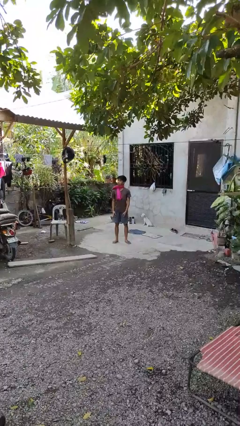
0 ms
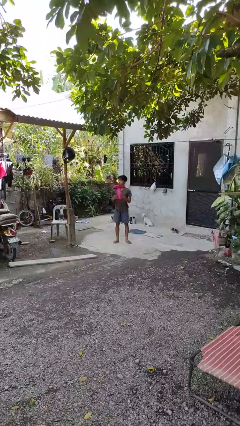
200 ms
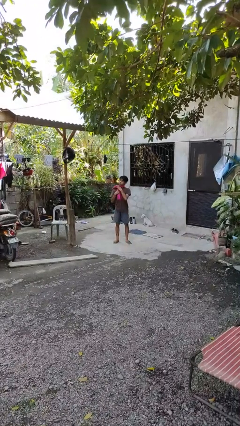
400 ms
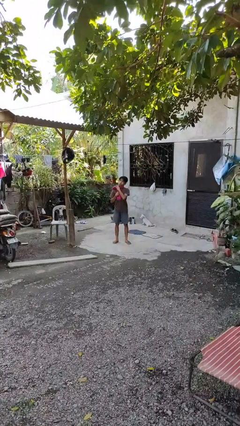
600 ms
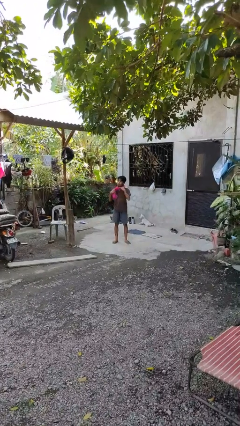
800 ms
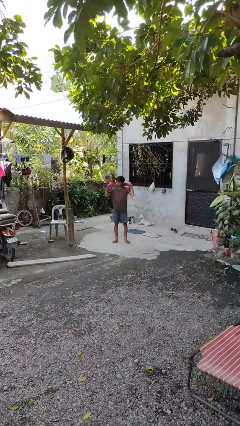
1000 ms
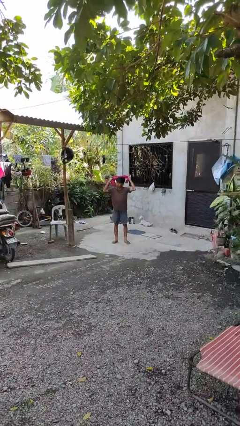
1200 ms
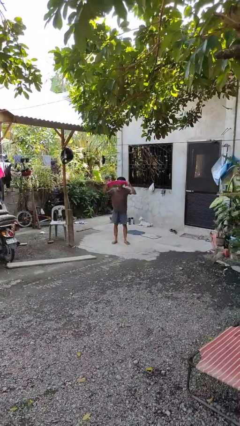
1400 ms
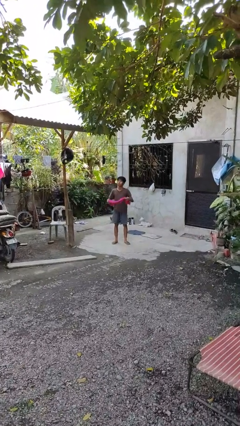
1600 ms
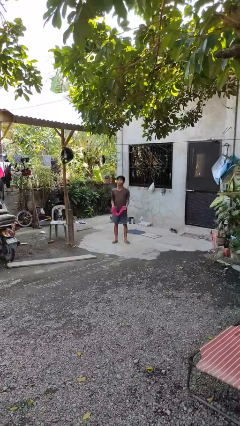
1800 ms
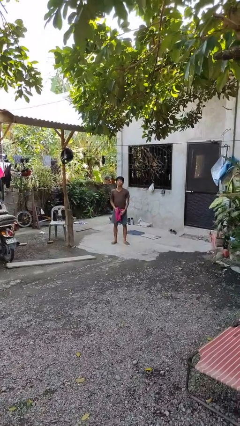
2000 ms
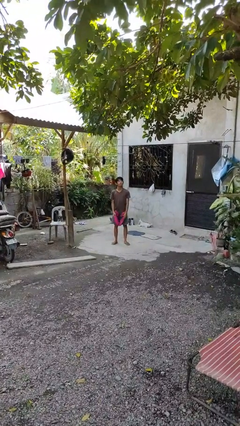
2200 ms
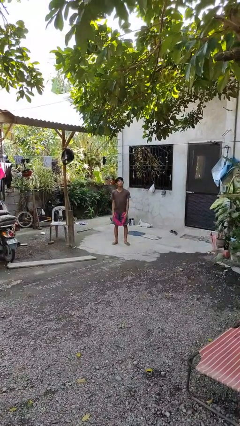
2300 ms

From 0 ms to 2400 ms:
person takes off scarf

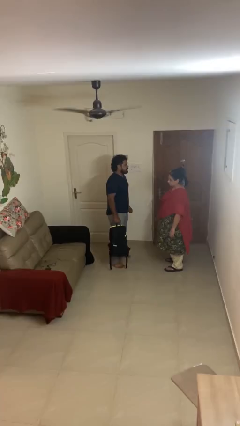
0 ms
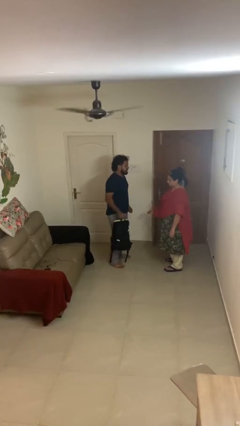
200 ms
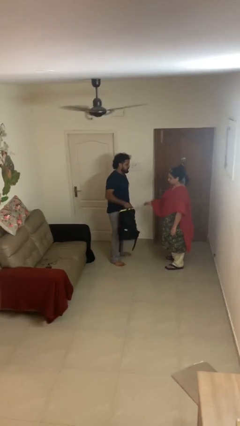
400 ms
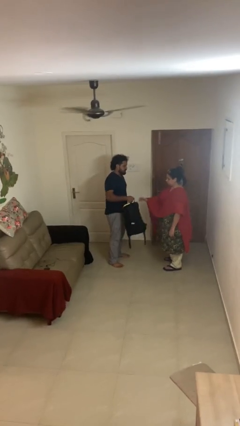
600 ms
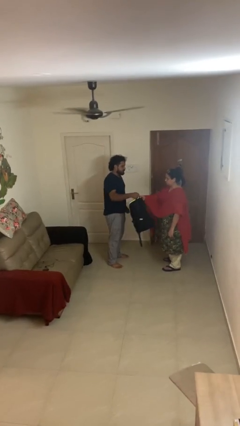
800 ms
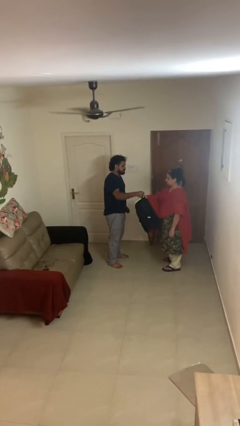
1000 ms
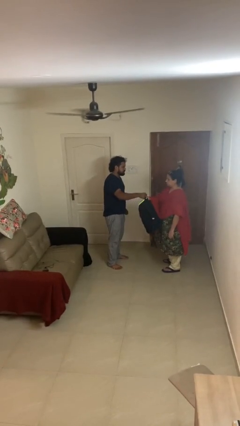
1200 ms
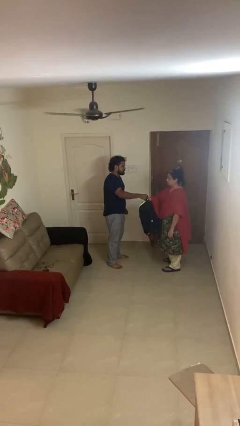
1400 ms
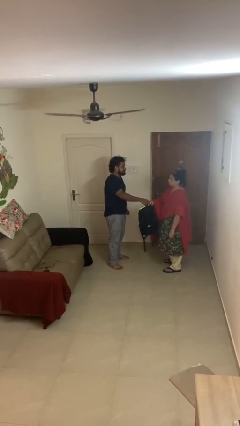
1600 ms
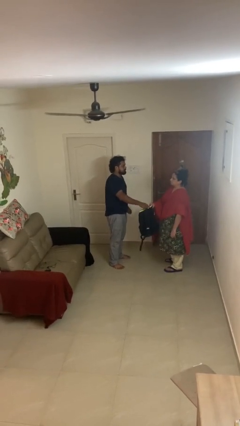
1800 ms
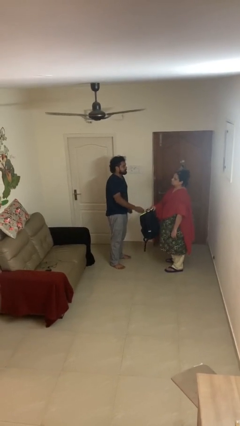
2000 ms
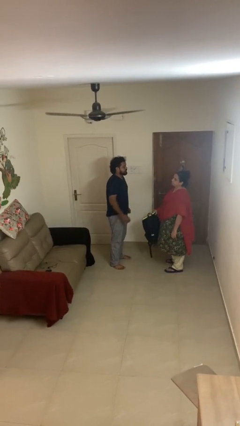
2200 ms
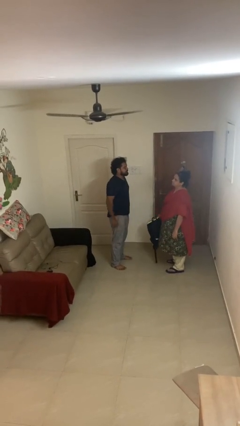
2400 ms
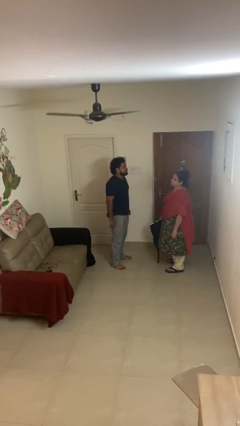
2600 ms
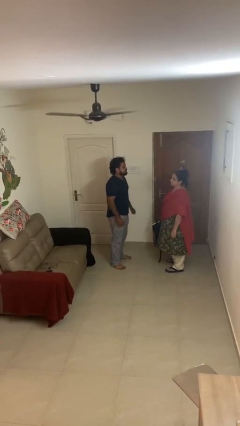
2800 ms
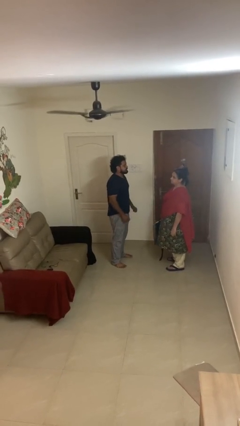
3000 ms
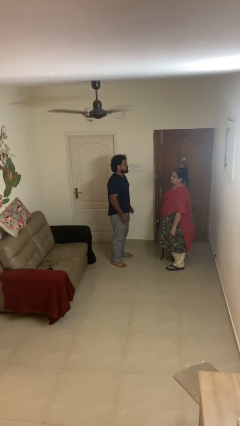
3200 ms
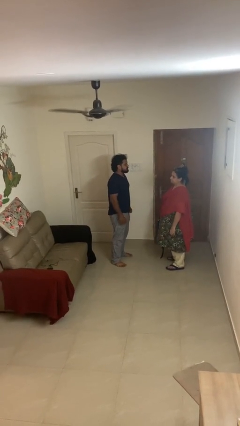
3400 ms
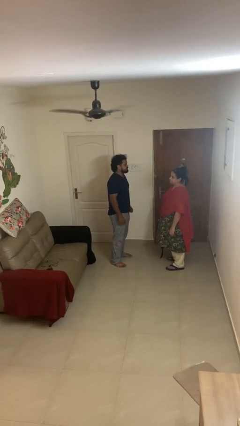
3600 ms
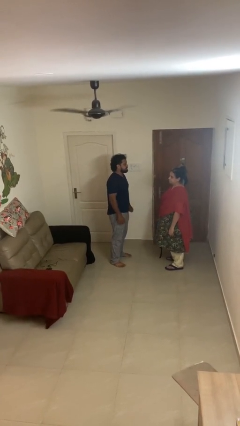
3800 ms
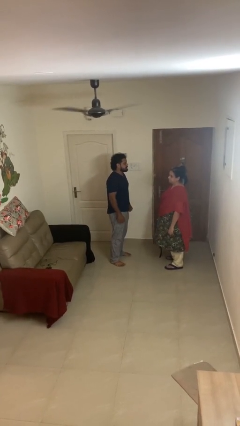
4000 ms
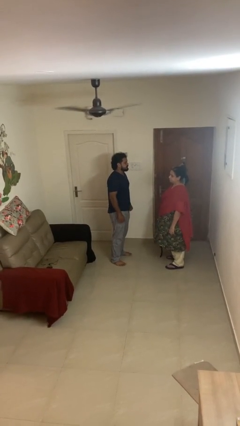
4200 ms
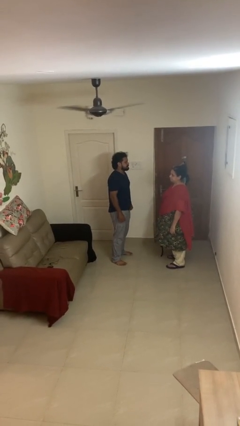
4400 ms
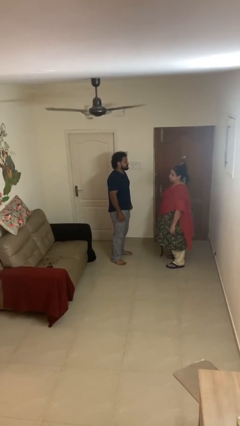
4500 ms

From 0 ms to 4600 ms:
person transfers object to person

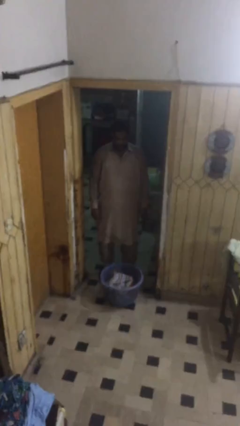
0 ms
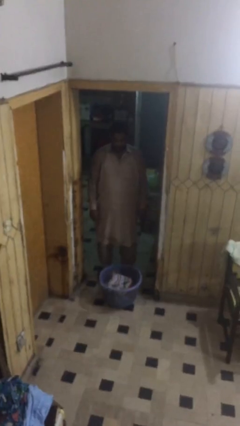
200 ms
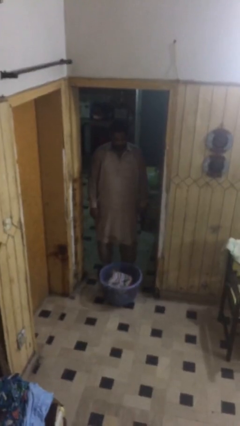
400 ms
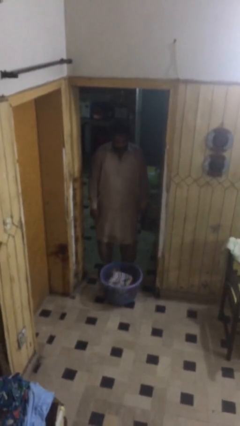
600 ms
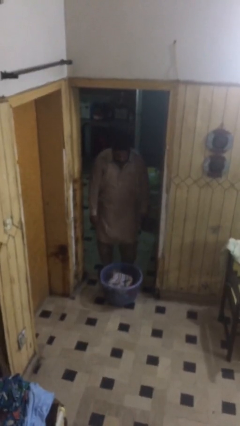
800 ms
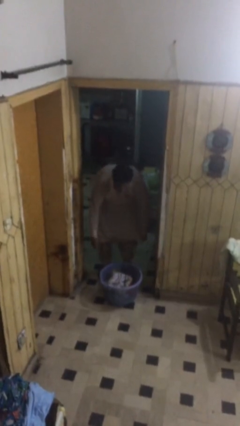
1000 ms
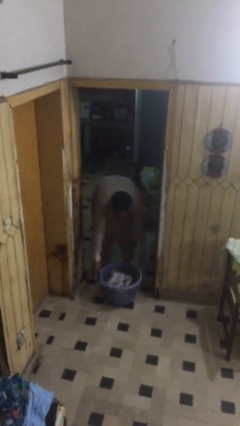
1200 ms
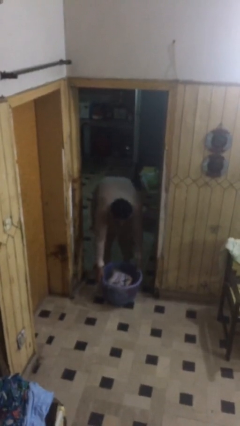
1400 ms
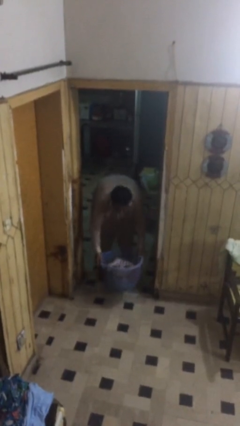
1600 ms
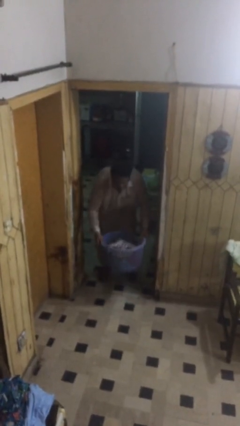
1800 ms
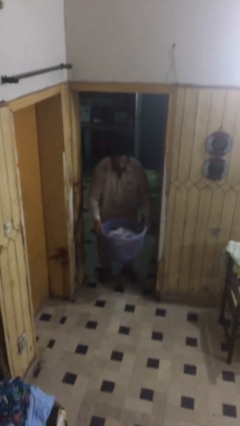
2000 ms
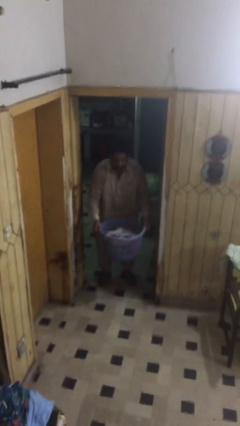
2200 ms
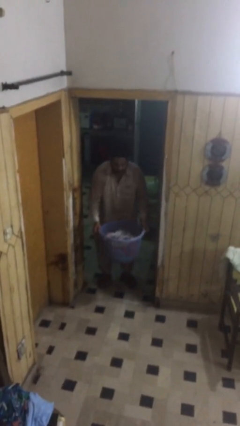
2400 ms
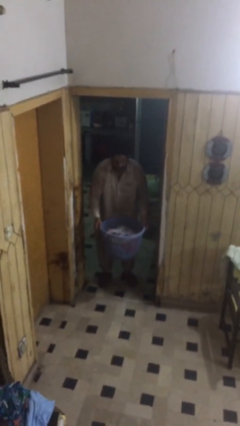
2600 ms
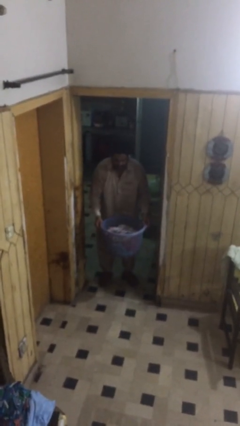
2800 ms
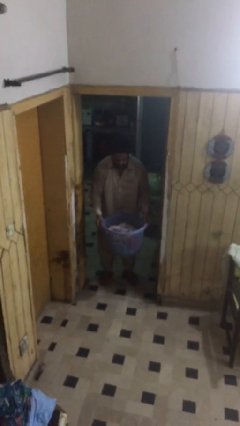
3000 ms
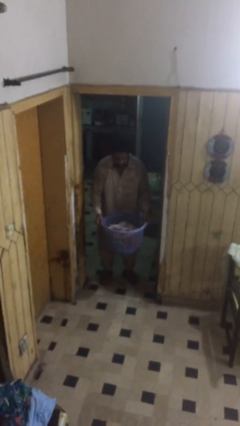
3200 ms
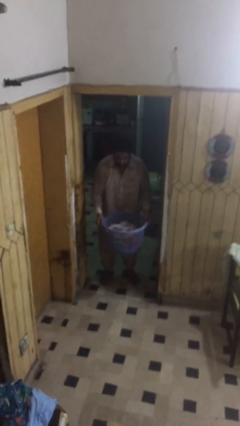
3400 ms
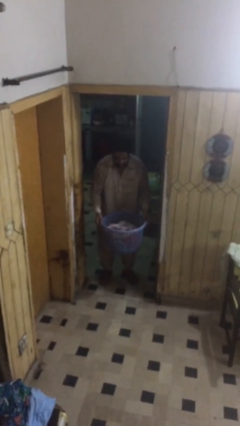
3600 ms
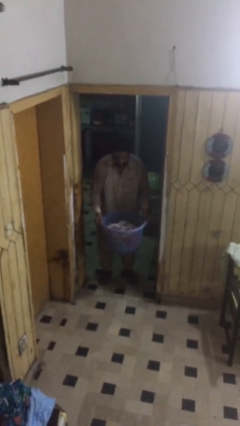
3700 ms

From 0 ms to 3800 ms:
person picks up object from floor

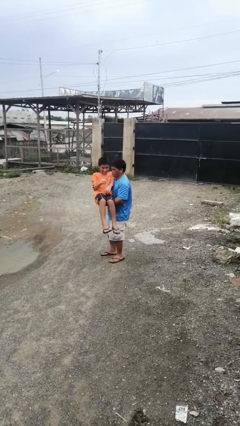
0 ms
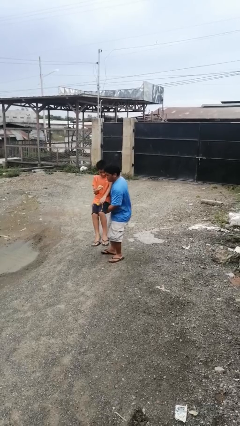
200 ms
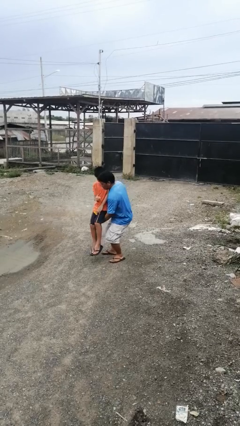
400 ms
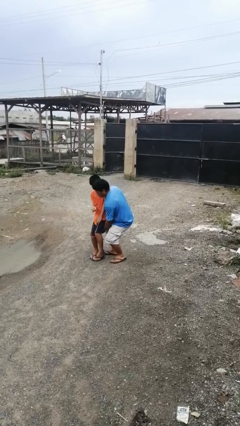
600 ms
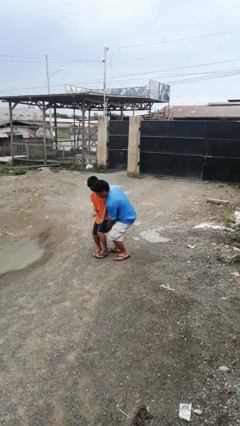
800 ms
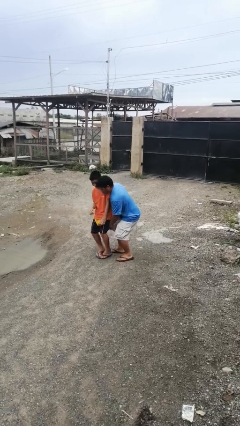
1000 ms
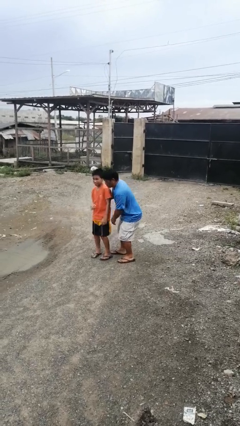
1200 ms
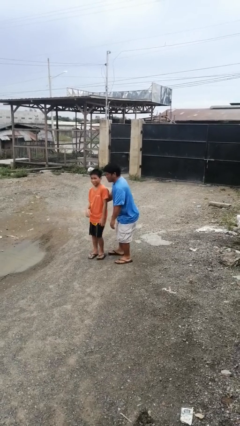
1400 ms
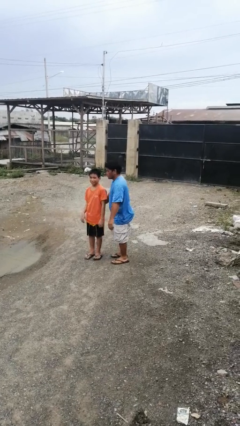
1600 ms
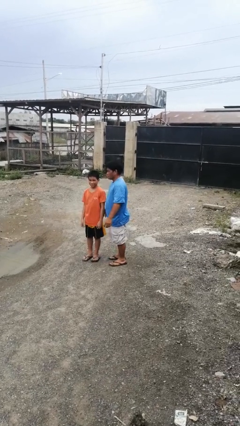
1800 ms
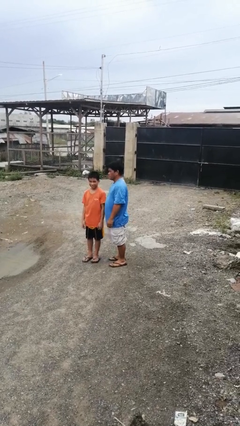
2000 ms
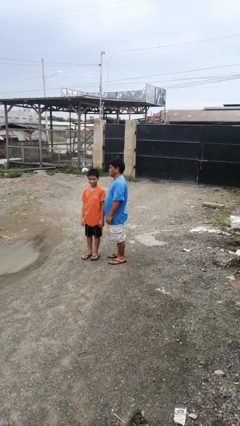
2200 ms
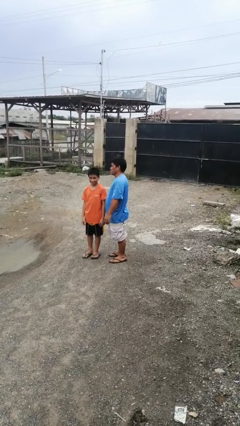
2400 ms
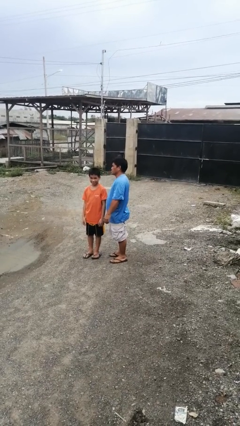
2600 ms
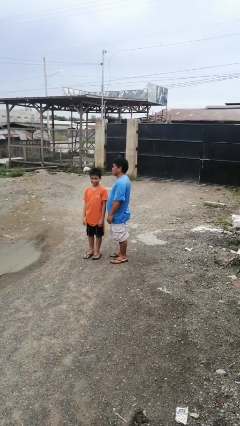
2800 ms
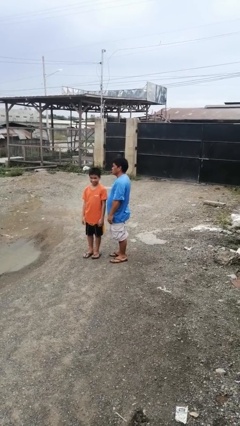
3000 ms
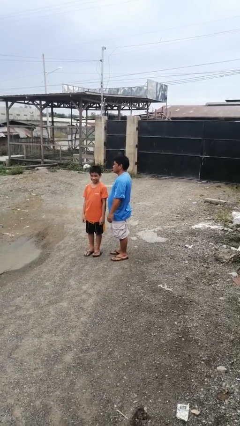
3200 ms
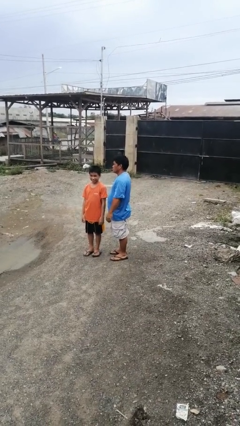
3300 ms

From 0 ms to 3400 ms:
person puts down person

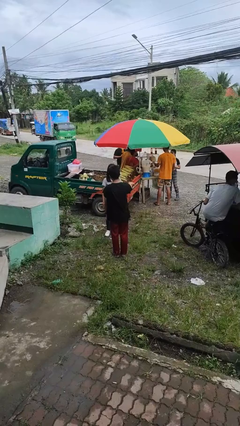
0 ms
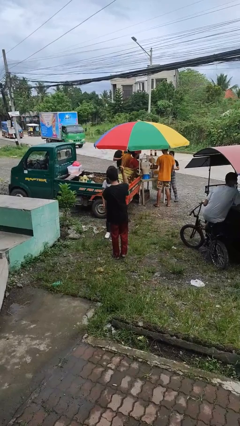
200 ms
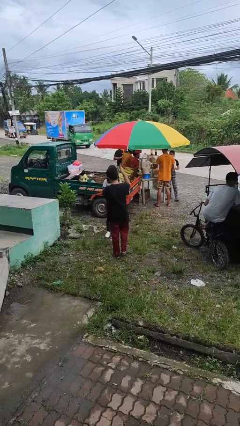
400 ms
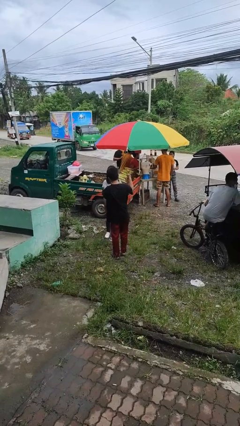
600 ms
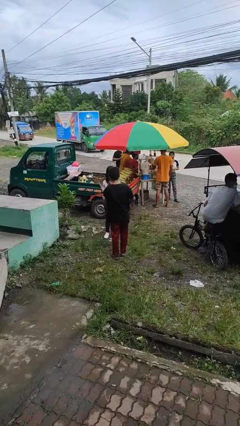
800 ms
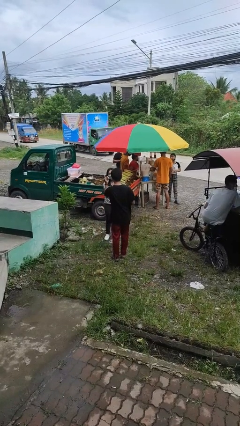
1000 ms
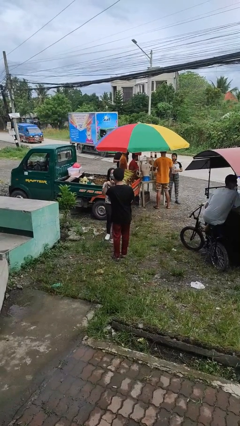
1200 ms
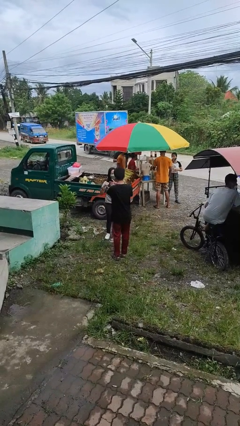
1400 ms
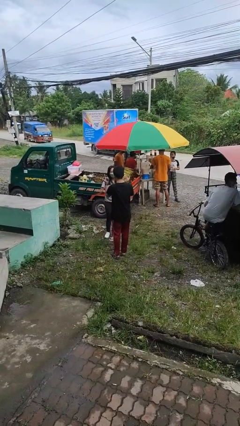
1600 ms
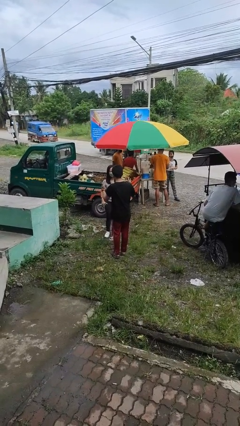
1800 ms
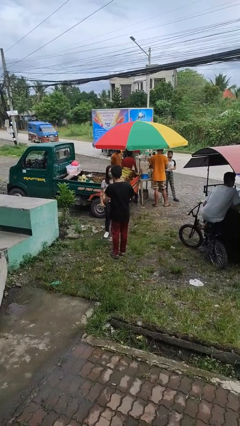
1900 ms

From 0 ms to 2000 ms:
person talks to person

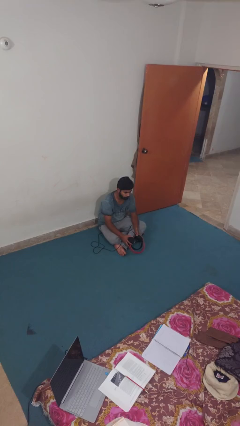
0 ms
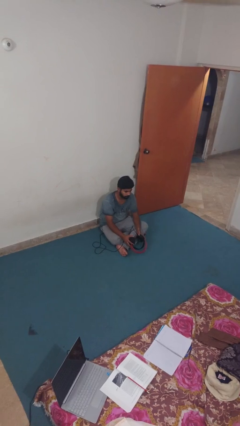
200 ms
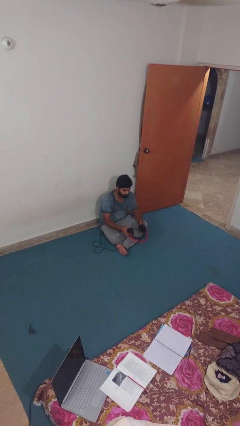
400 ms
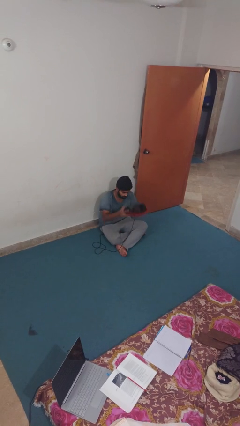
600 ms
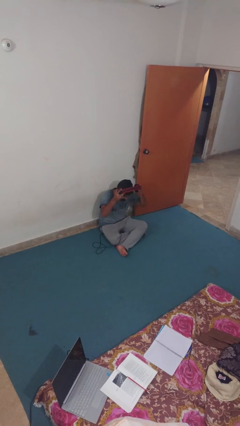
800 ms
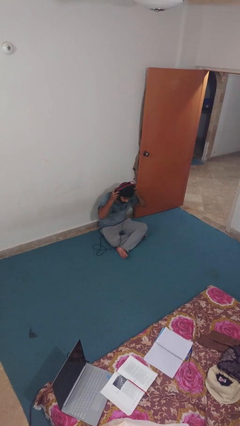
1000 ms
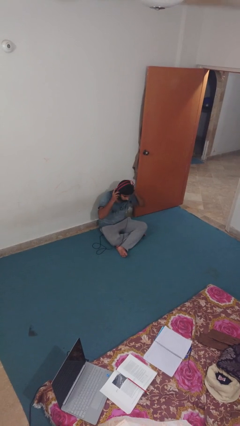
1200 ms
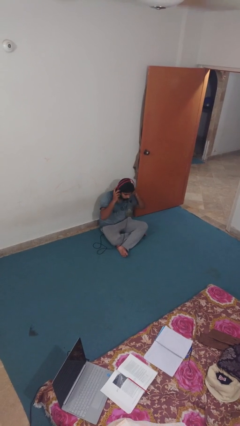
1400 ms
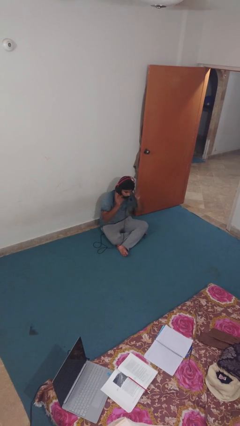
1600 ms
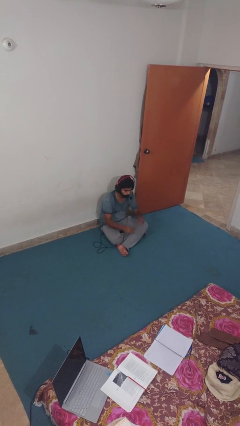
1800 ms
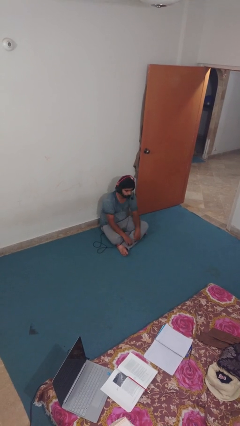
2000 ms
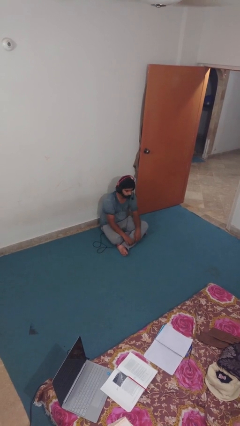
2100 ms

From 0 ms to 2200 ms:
person puts on headphones
